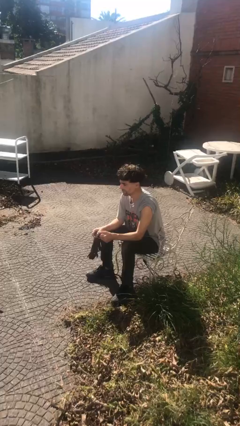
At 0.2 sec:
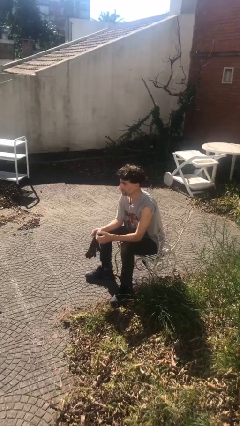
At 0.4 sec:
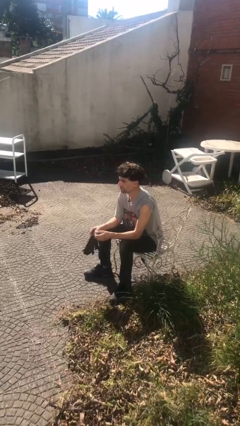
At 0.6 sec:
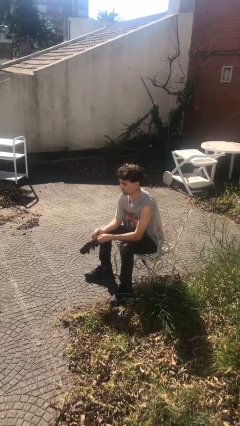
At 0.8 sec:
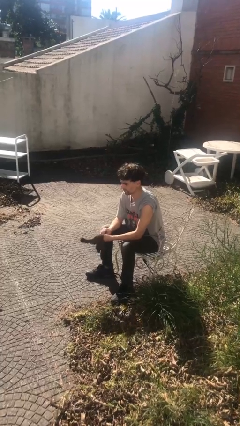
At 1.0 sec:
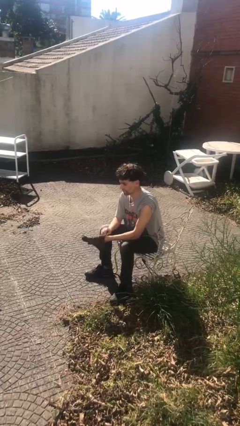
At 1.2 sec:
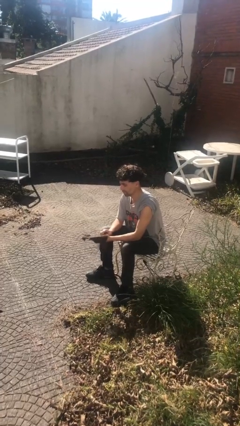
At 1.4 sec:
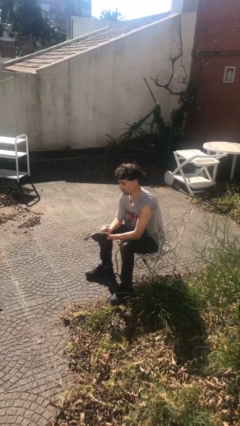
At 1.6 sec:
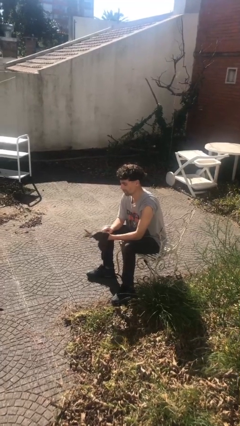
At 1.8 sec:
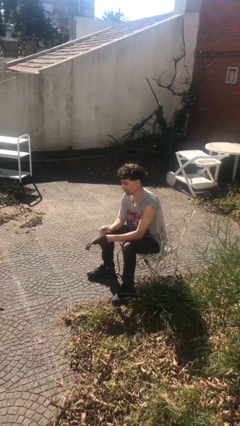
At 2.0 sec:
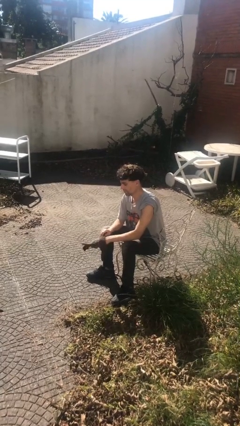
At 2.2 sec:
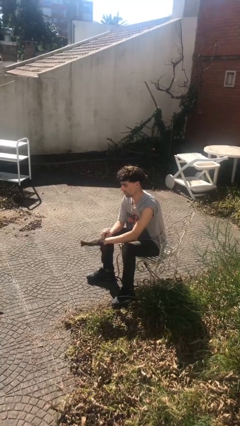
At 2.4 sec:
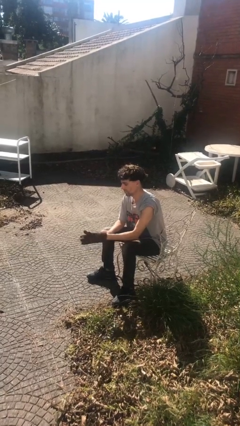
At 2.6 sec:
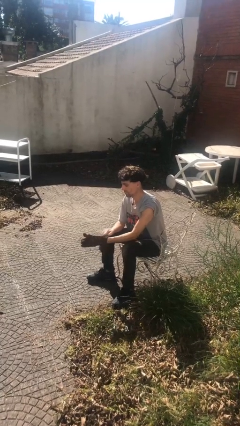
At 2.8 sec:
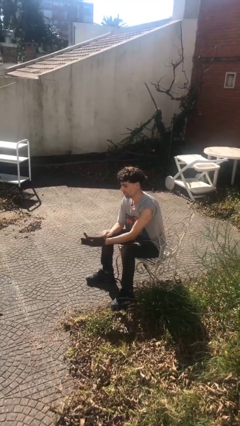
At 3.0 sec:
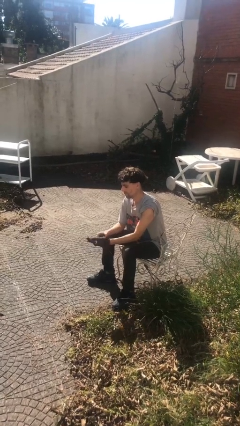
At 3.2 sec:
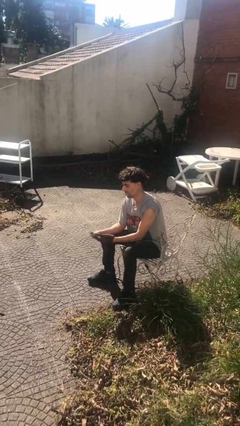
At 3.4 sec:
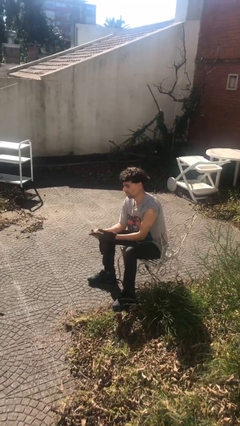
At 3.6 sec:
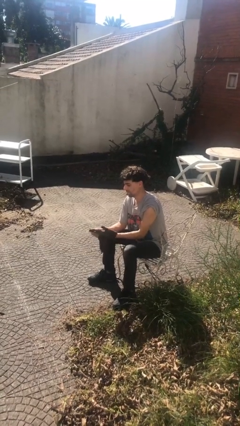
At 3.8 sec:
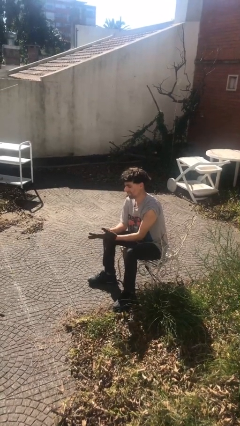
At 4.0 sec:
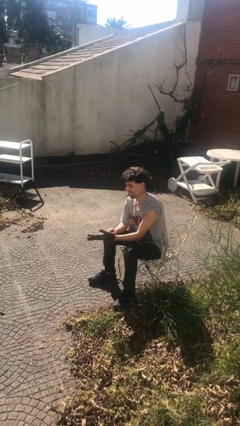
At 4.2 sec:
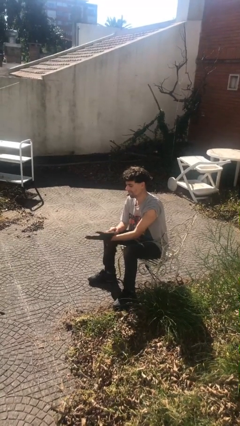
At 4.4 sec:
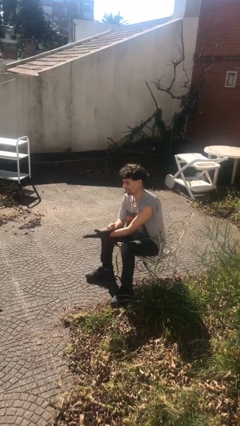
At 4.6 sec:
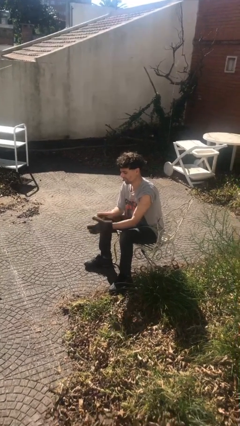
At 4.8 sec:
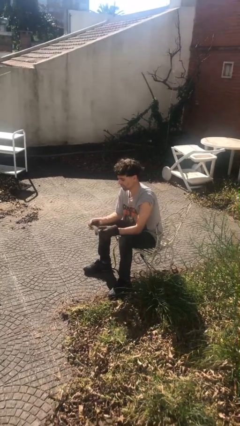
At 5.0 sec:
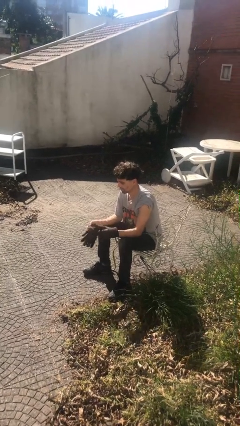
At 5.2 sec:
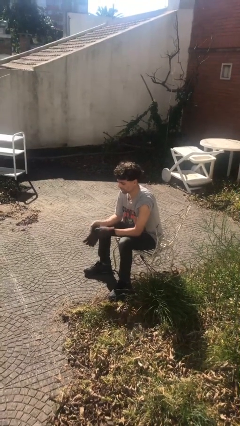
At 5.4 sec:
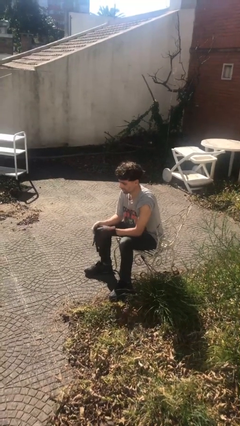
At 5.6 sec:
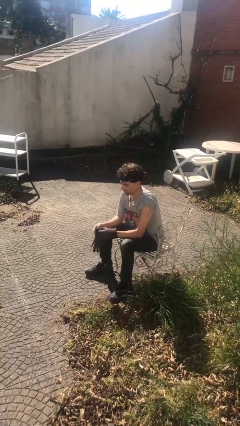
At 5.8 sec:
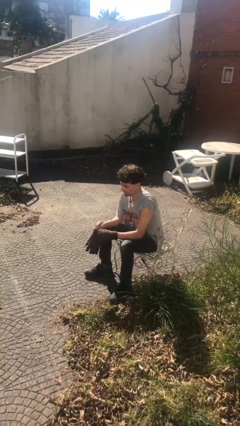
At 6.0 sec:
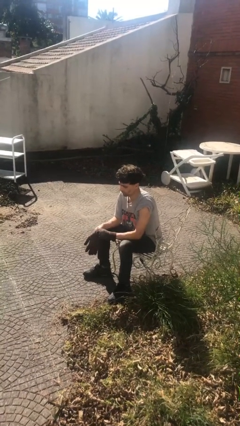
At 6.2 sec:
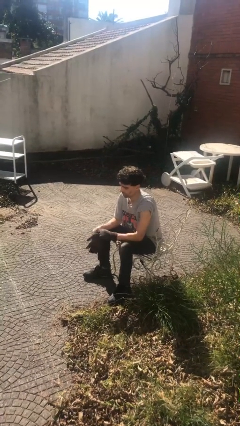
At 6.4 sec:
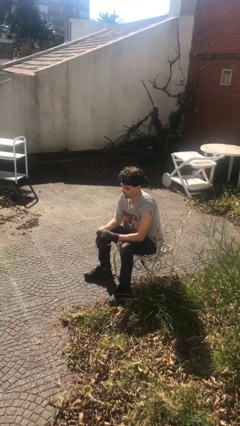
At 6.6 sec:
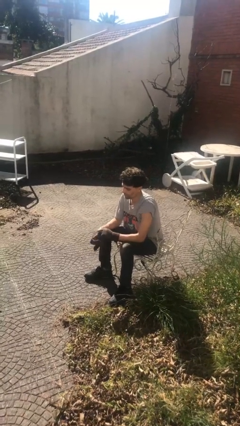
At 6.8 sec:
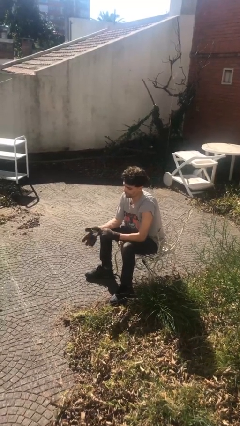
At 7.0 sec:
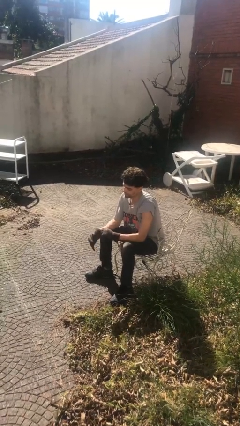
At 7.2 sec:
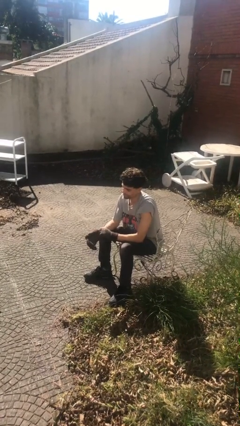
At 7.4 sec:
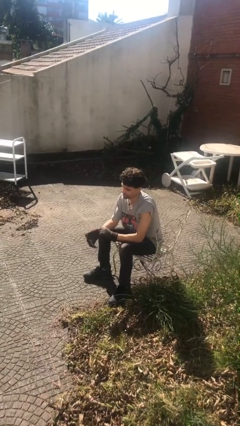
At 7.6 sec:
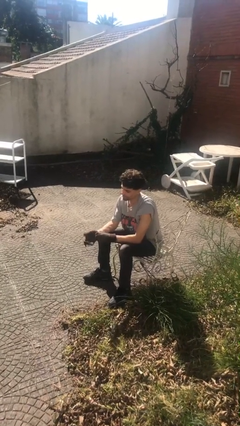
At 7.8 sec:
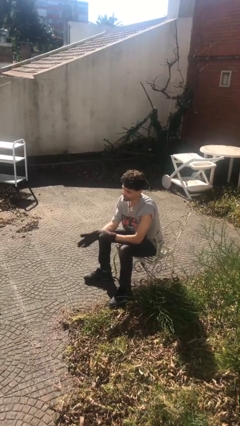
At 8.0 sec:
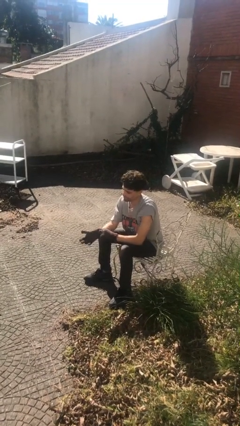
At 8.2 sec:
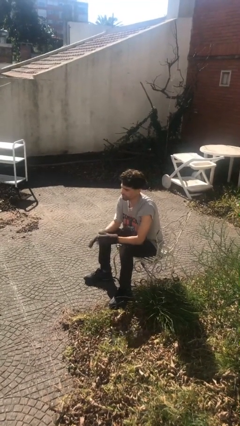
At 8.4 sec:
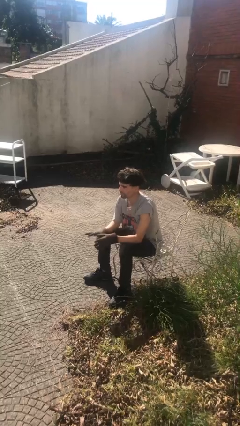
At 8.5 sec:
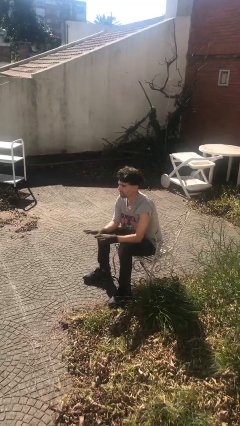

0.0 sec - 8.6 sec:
person puts on gloves

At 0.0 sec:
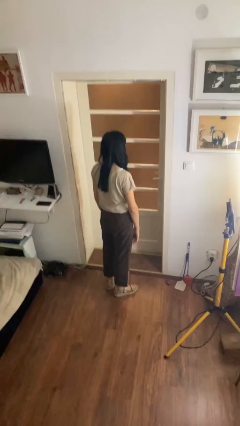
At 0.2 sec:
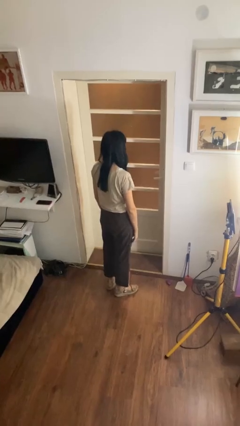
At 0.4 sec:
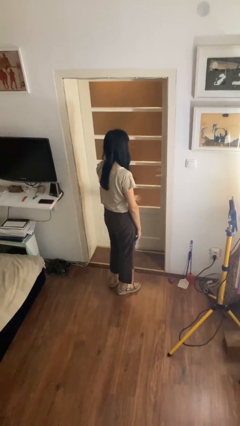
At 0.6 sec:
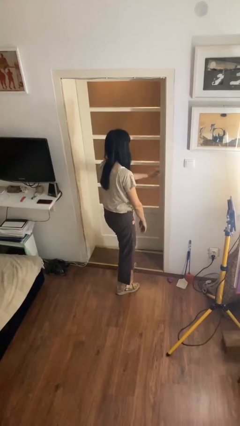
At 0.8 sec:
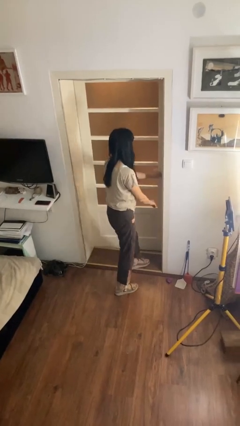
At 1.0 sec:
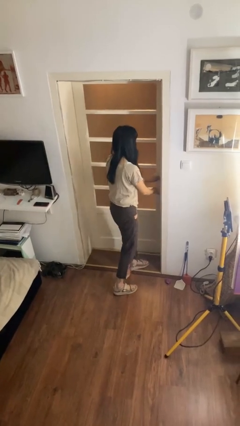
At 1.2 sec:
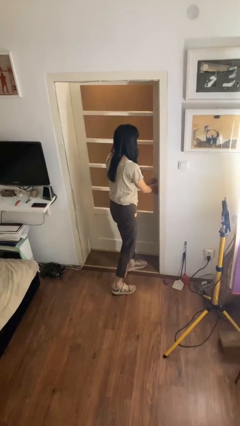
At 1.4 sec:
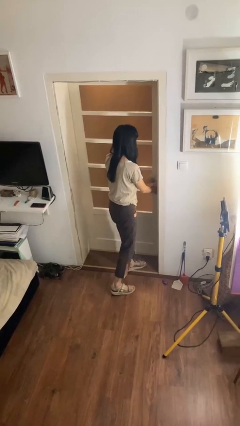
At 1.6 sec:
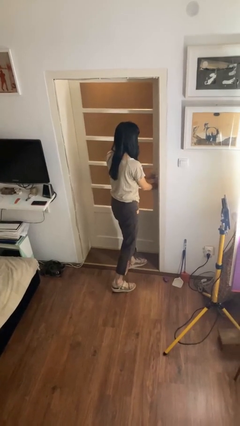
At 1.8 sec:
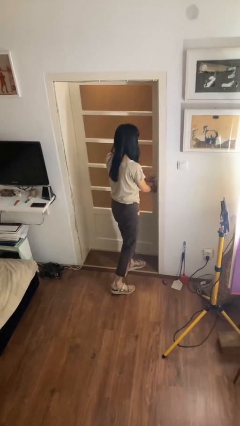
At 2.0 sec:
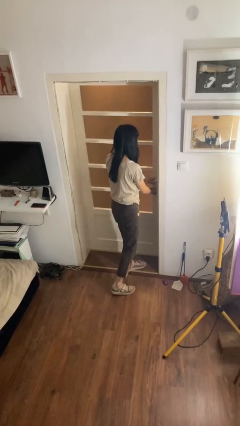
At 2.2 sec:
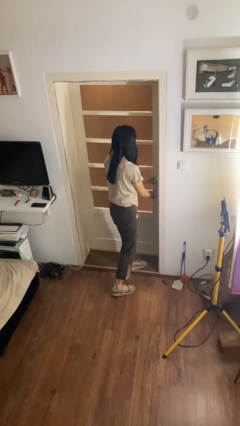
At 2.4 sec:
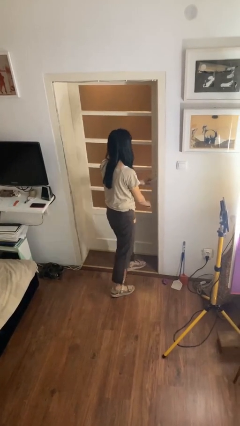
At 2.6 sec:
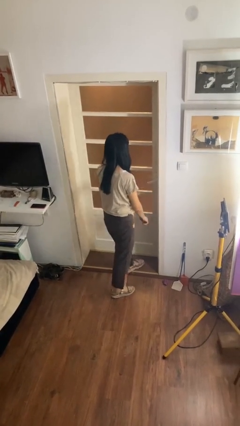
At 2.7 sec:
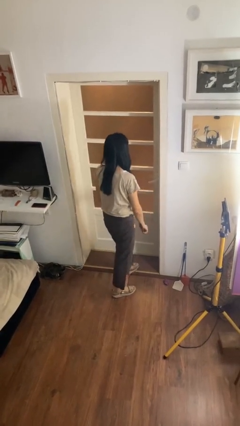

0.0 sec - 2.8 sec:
person locks door with keys

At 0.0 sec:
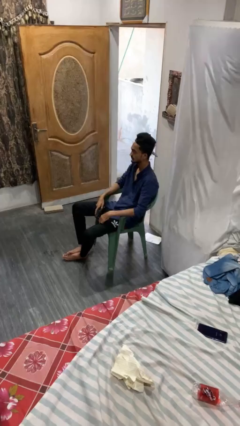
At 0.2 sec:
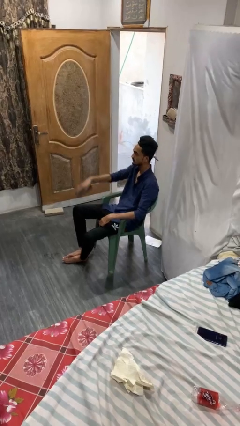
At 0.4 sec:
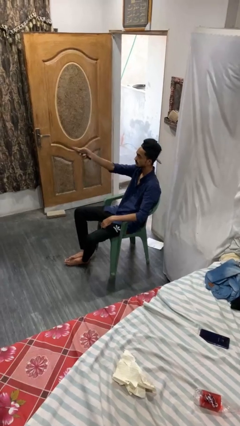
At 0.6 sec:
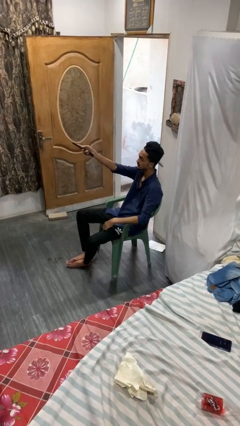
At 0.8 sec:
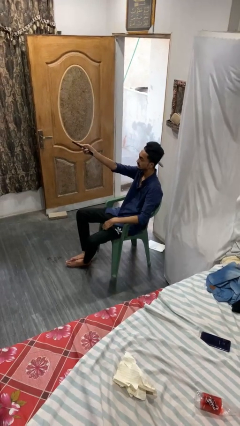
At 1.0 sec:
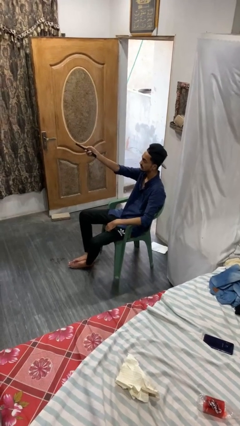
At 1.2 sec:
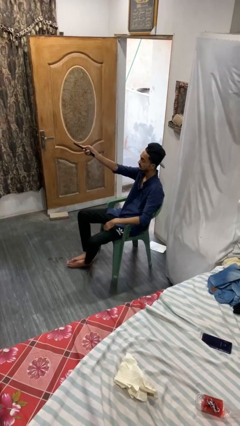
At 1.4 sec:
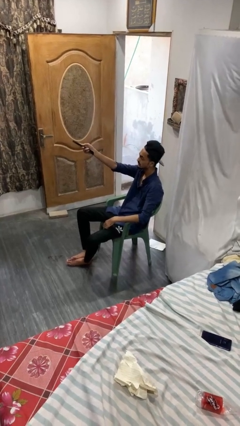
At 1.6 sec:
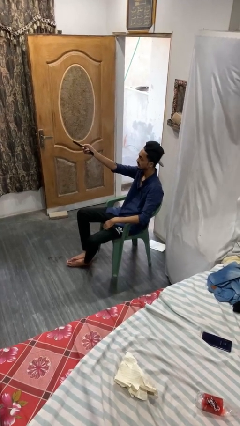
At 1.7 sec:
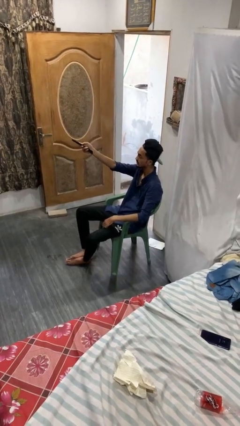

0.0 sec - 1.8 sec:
person uses television remote

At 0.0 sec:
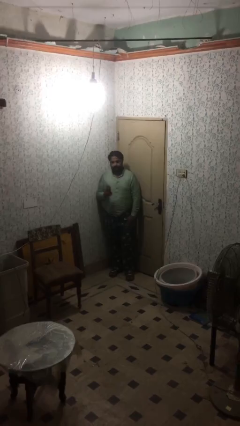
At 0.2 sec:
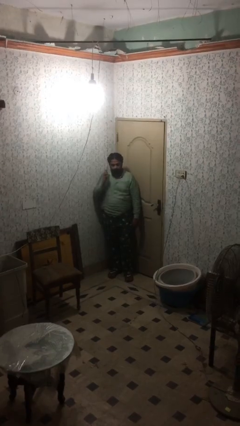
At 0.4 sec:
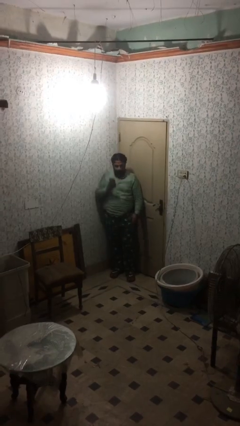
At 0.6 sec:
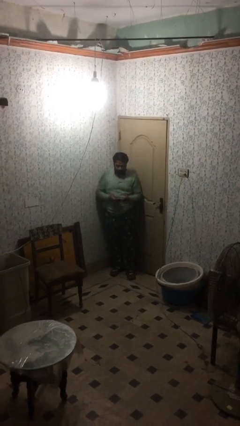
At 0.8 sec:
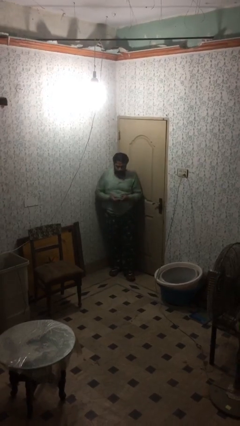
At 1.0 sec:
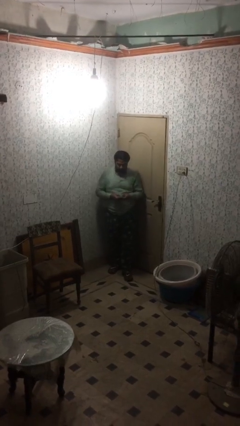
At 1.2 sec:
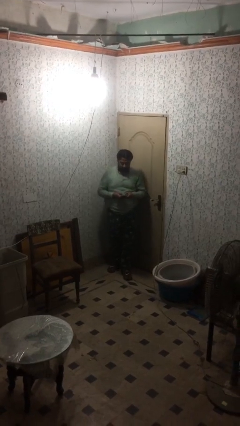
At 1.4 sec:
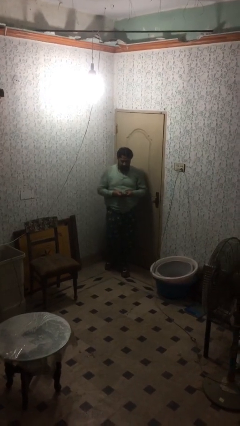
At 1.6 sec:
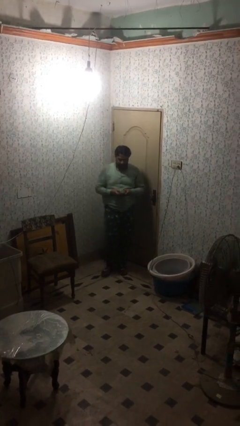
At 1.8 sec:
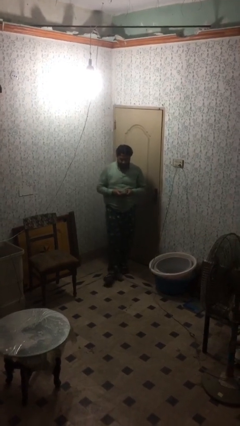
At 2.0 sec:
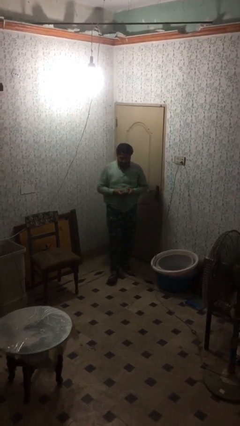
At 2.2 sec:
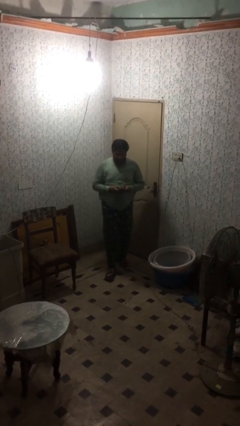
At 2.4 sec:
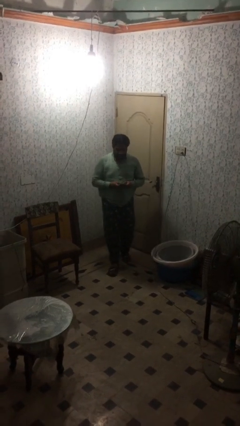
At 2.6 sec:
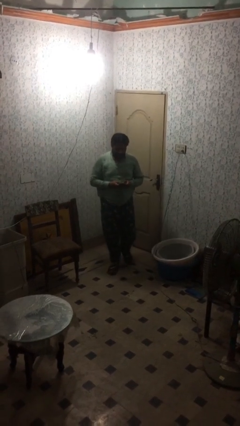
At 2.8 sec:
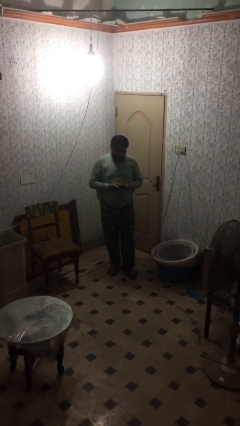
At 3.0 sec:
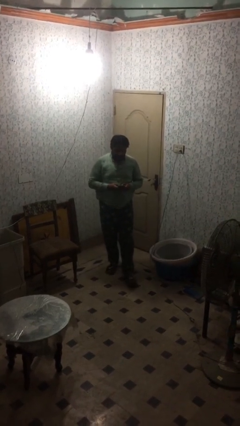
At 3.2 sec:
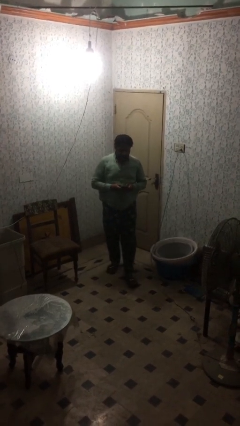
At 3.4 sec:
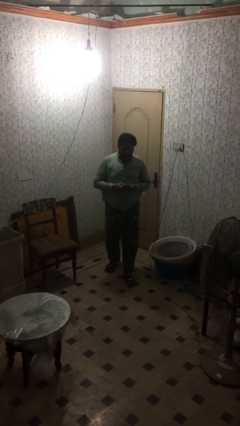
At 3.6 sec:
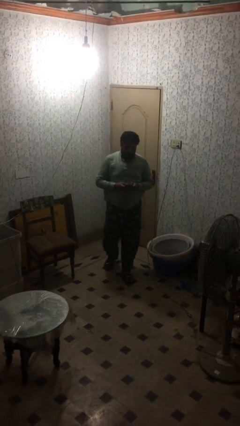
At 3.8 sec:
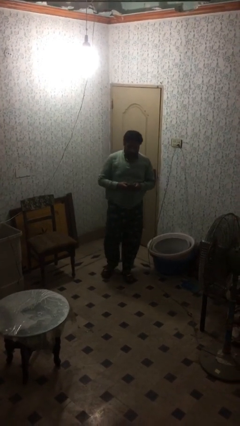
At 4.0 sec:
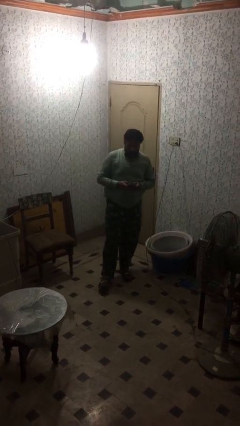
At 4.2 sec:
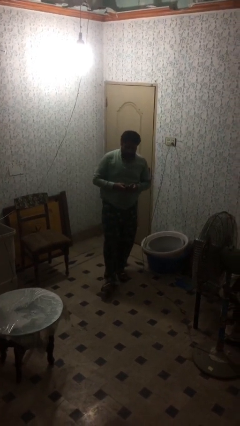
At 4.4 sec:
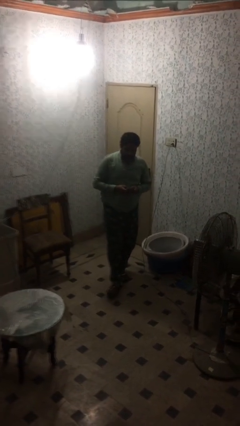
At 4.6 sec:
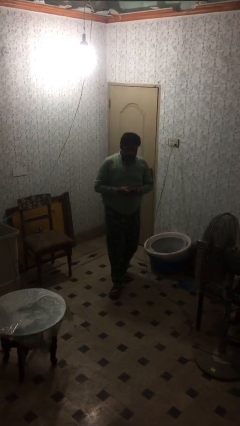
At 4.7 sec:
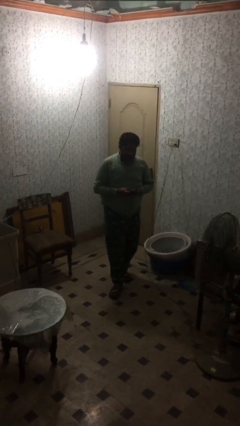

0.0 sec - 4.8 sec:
person texts on phone
